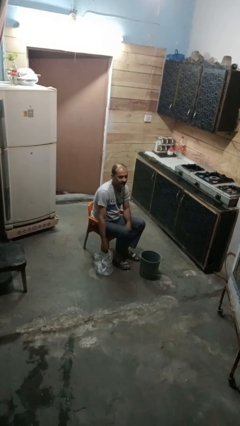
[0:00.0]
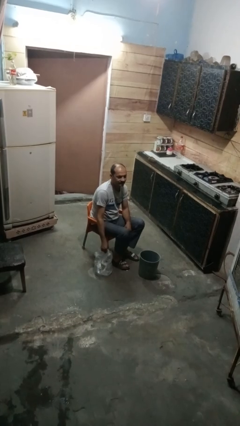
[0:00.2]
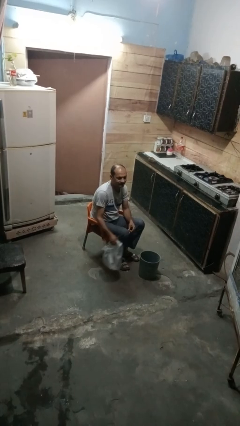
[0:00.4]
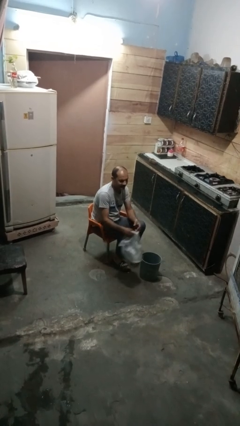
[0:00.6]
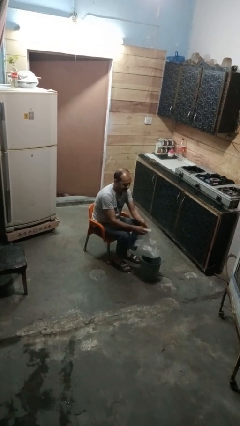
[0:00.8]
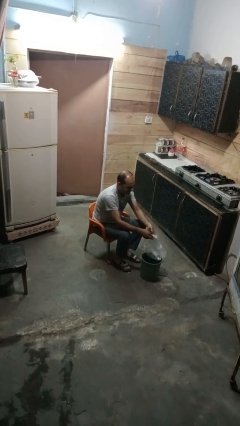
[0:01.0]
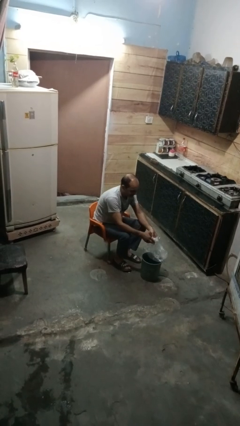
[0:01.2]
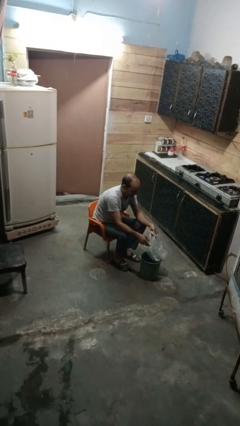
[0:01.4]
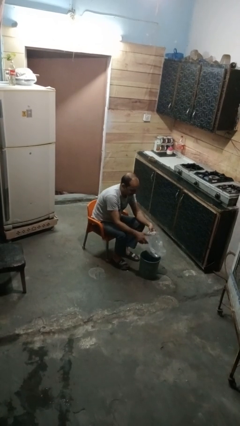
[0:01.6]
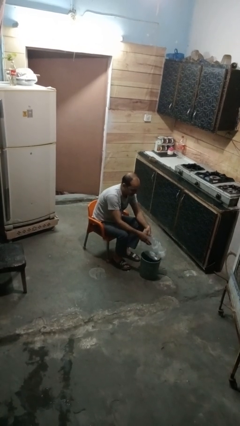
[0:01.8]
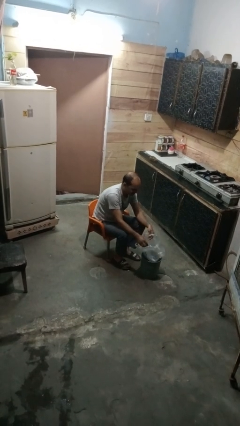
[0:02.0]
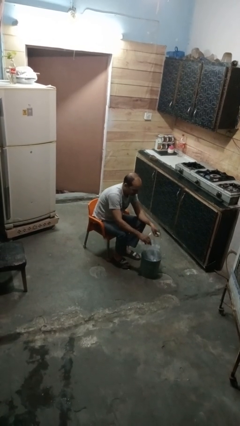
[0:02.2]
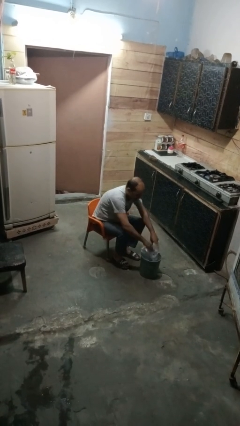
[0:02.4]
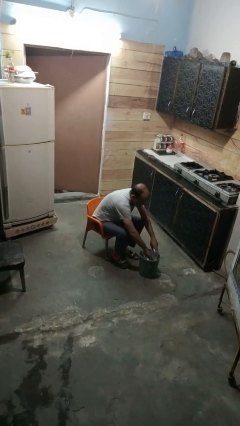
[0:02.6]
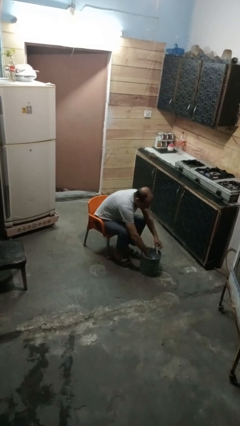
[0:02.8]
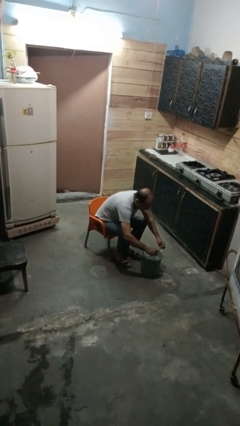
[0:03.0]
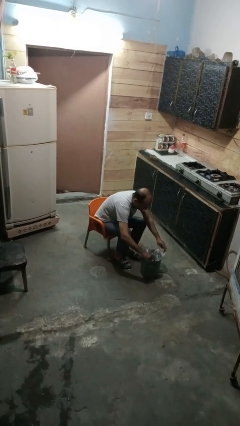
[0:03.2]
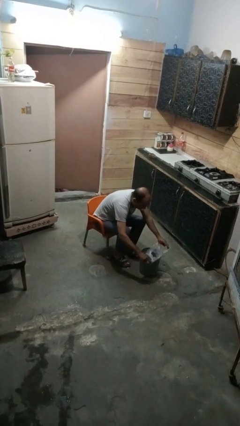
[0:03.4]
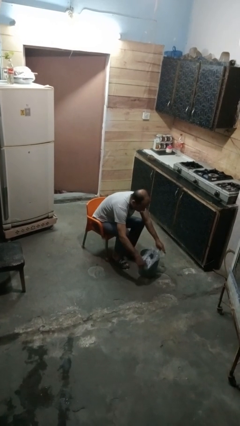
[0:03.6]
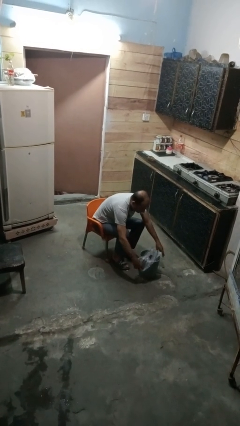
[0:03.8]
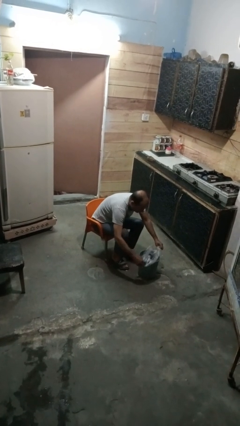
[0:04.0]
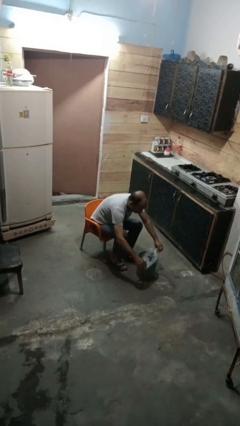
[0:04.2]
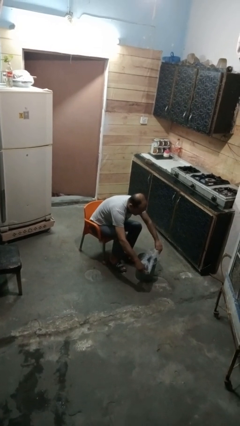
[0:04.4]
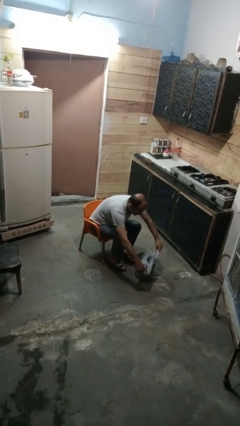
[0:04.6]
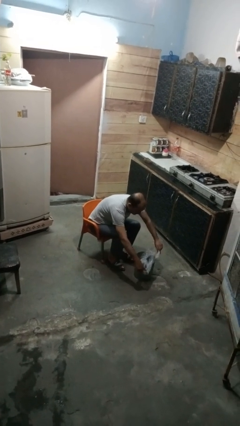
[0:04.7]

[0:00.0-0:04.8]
person inserts trashbag into trashcan

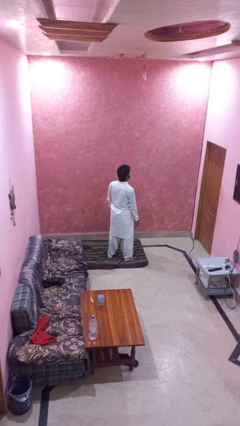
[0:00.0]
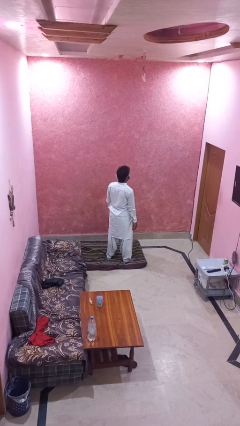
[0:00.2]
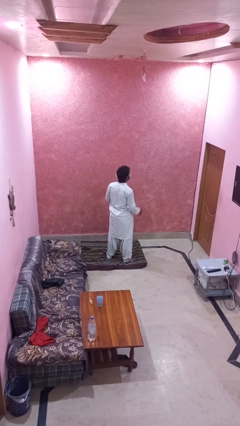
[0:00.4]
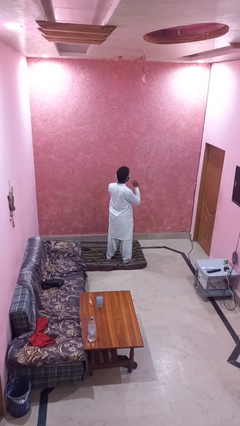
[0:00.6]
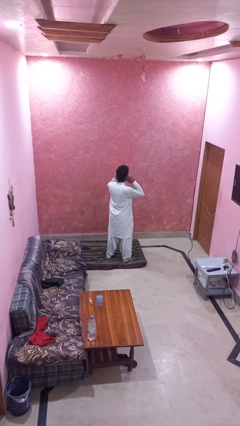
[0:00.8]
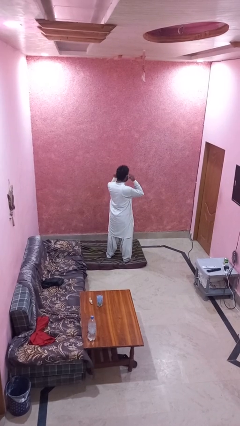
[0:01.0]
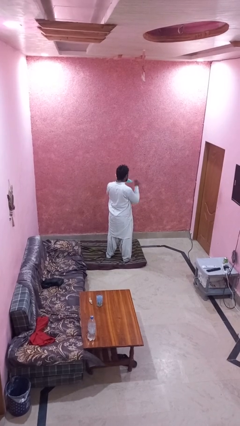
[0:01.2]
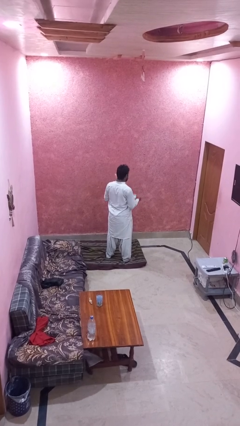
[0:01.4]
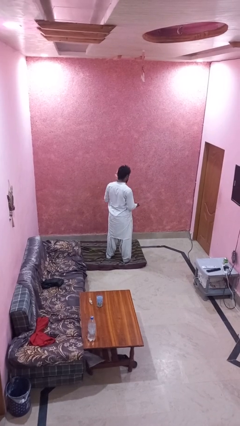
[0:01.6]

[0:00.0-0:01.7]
person takes off facemask

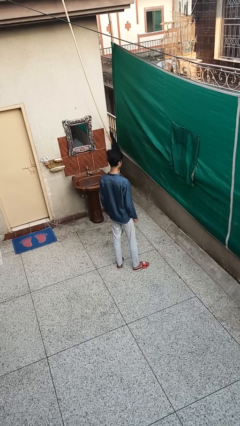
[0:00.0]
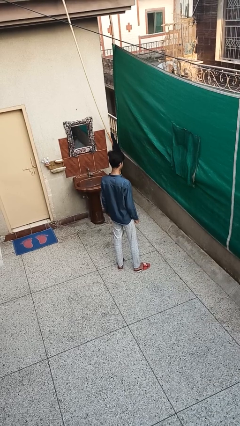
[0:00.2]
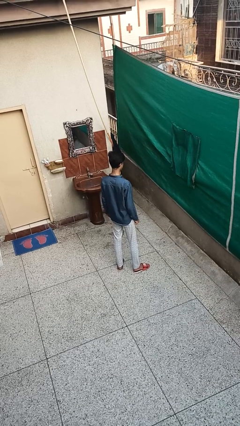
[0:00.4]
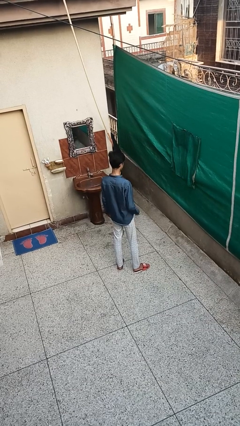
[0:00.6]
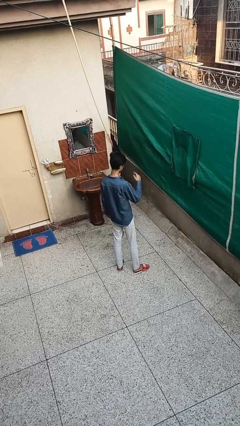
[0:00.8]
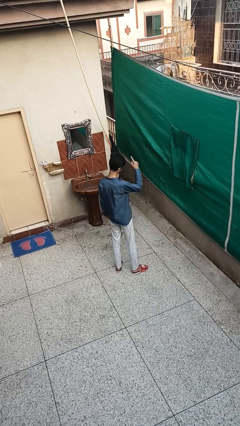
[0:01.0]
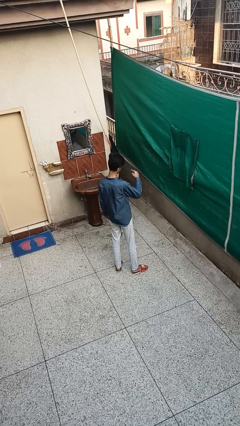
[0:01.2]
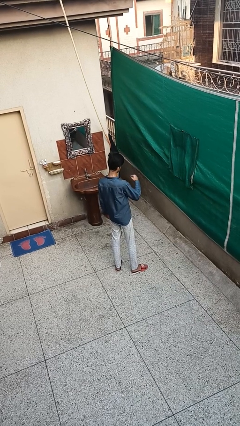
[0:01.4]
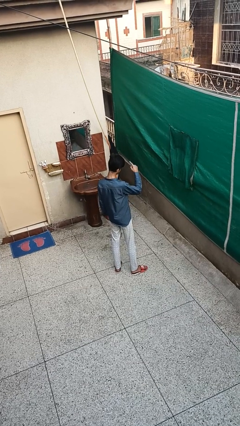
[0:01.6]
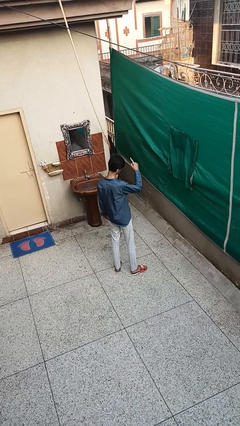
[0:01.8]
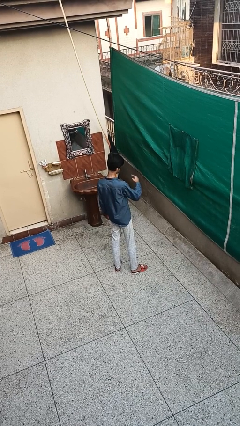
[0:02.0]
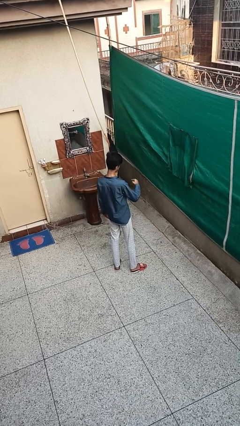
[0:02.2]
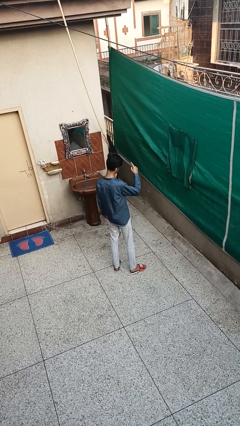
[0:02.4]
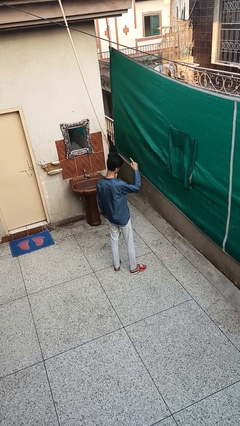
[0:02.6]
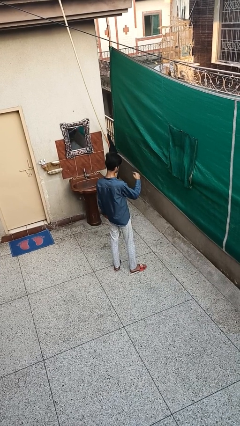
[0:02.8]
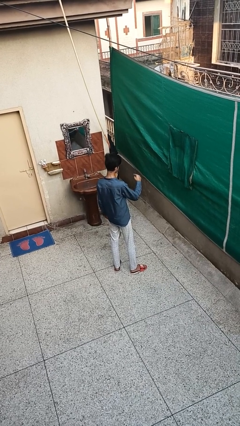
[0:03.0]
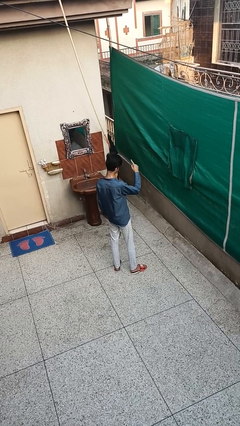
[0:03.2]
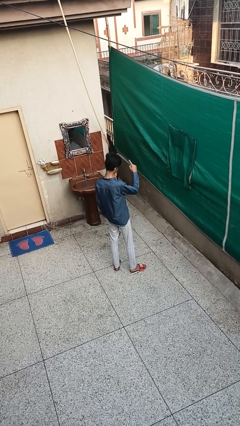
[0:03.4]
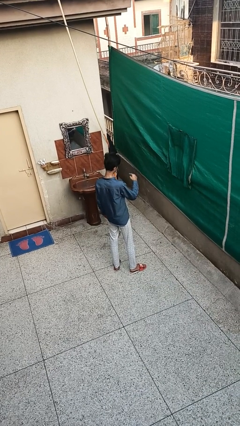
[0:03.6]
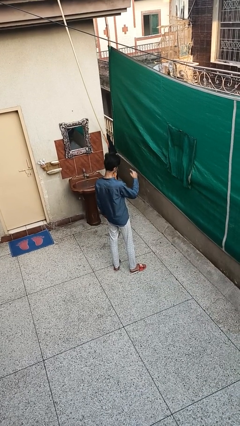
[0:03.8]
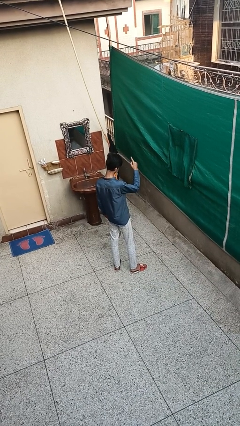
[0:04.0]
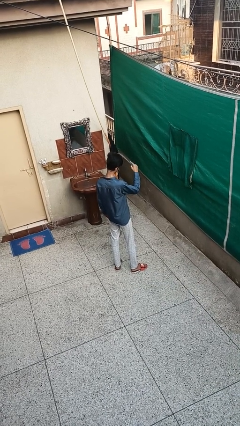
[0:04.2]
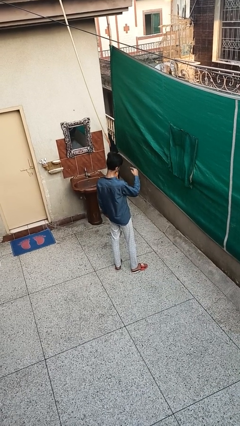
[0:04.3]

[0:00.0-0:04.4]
person gestures swipe down

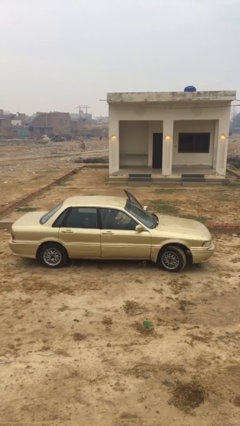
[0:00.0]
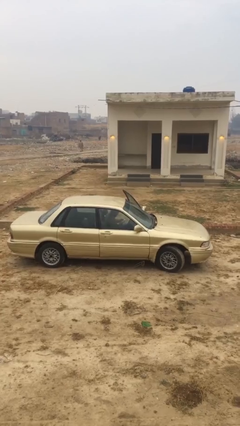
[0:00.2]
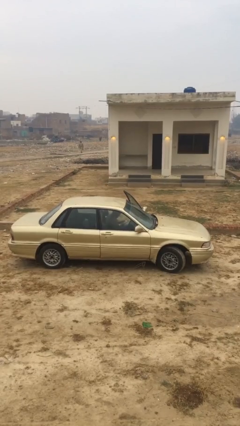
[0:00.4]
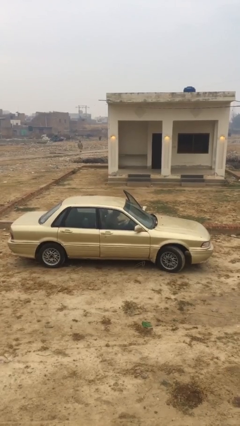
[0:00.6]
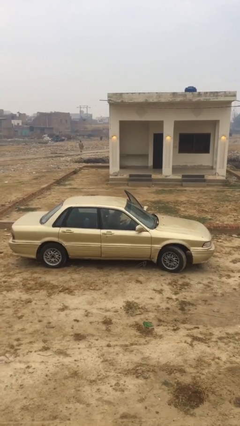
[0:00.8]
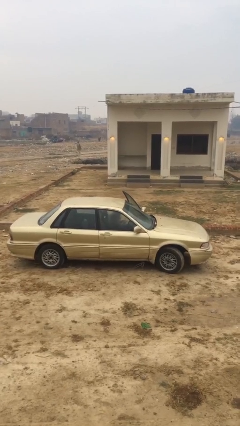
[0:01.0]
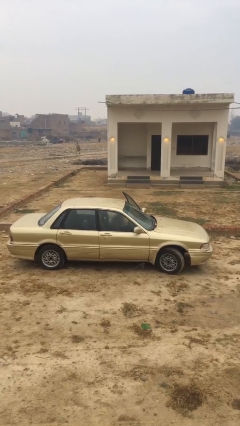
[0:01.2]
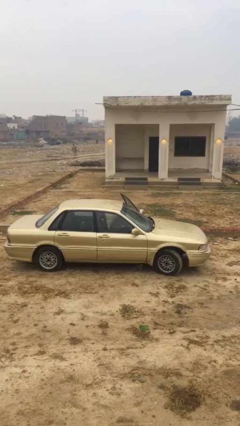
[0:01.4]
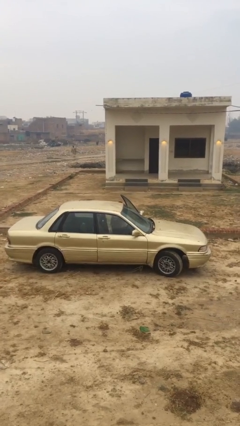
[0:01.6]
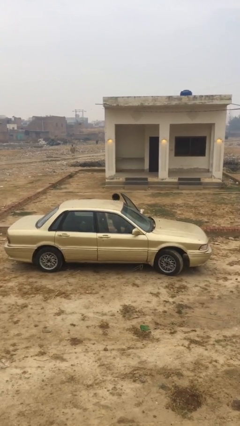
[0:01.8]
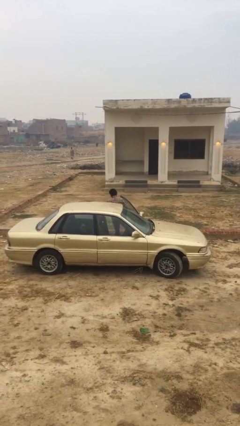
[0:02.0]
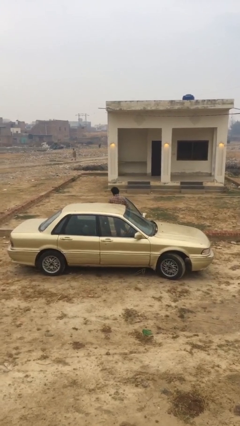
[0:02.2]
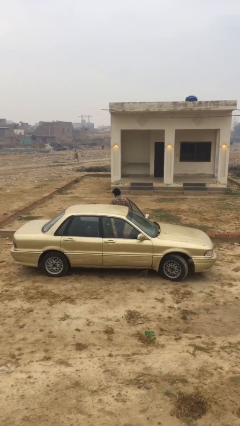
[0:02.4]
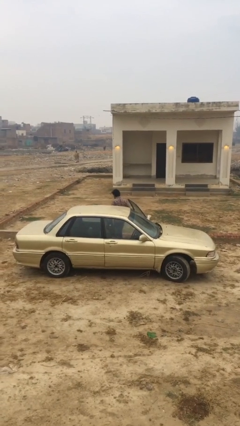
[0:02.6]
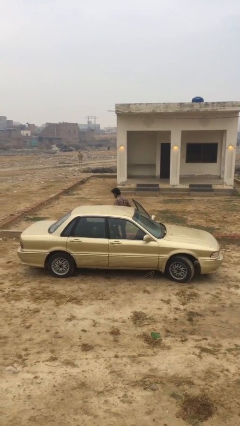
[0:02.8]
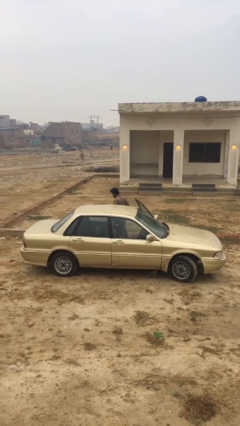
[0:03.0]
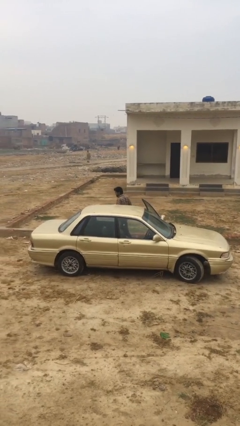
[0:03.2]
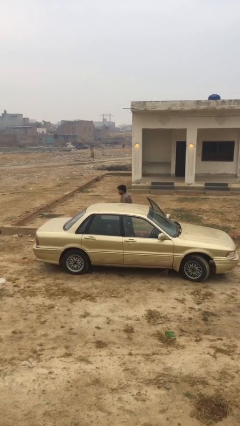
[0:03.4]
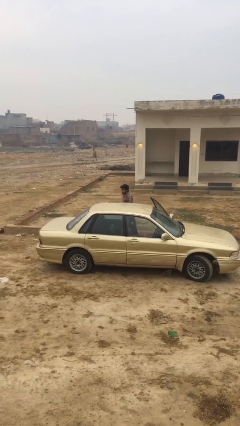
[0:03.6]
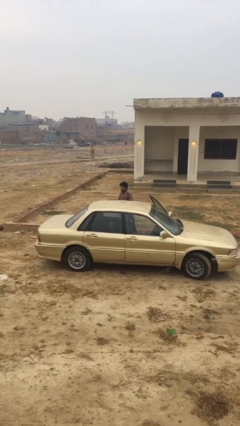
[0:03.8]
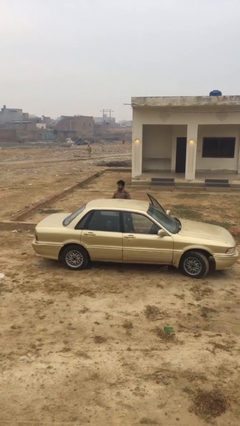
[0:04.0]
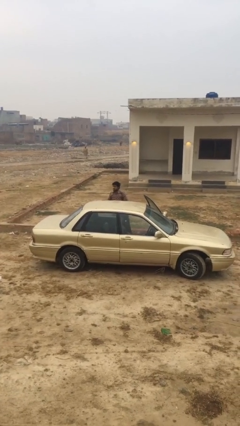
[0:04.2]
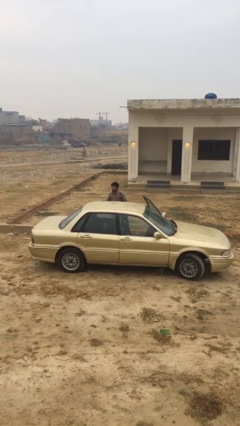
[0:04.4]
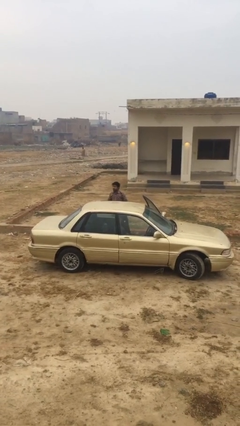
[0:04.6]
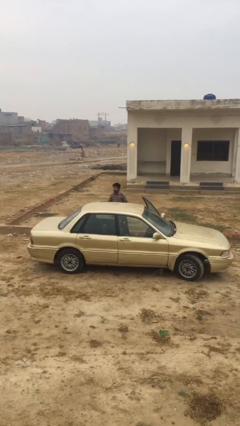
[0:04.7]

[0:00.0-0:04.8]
person exits car

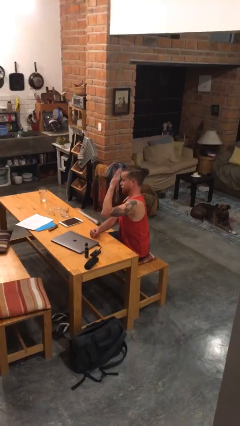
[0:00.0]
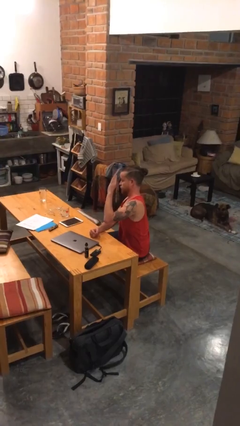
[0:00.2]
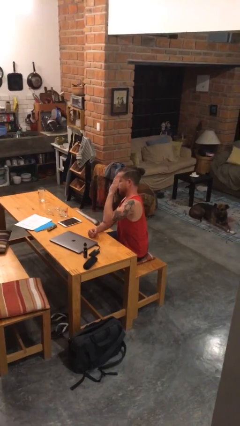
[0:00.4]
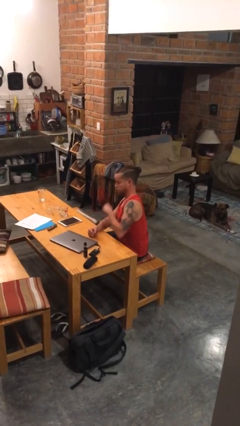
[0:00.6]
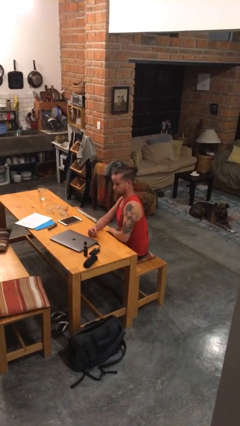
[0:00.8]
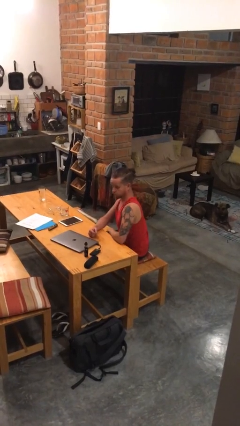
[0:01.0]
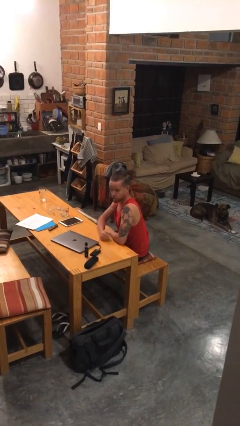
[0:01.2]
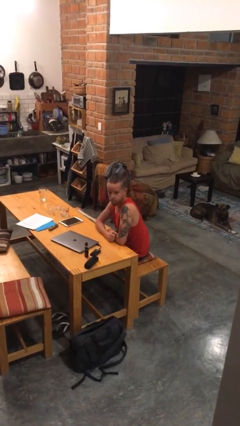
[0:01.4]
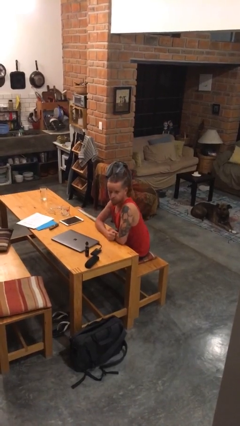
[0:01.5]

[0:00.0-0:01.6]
person gestures lower hand

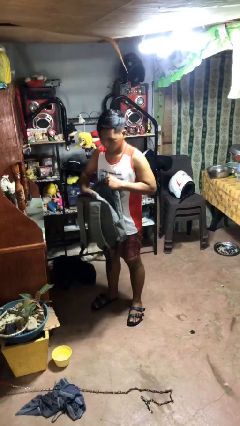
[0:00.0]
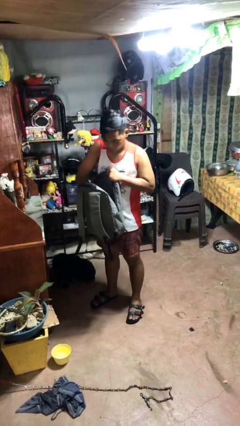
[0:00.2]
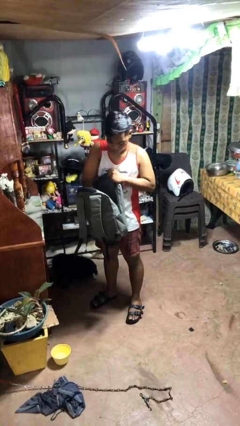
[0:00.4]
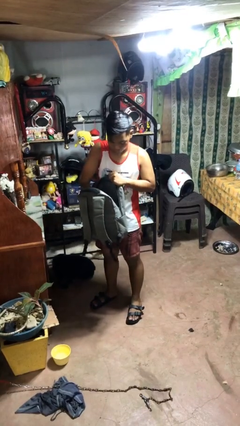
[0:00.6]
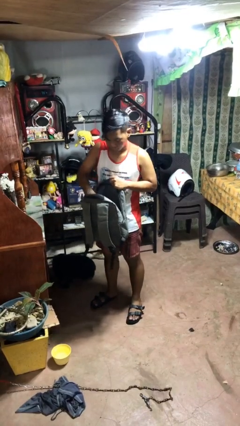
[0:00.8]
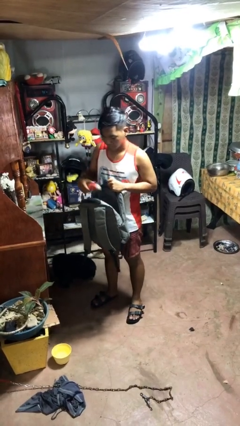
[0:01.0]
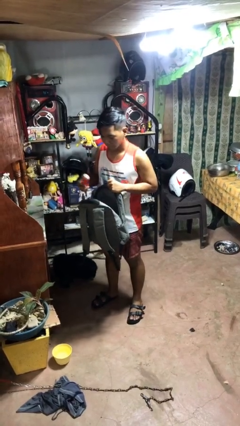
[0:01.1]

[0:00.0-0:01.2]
person takes object from bag
